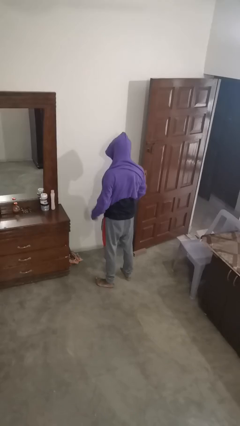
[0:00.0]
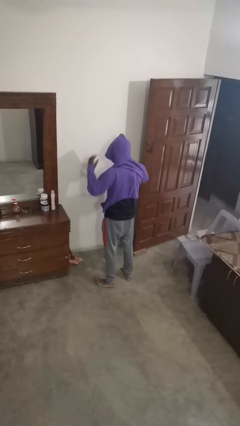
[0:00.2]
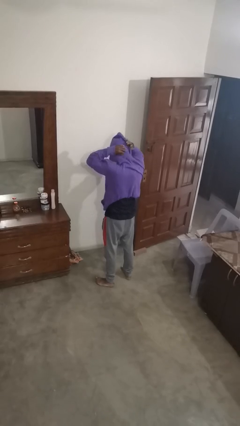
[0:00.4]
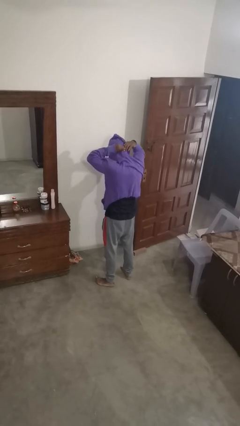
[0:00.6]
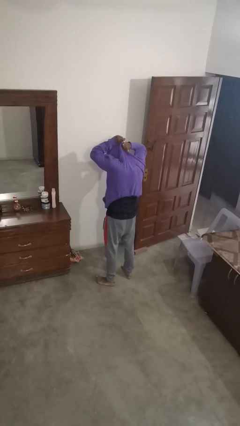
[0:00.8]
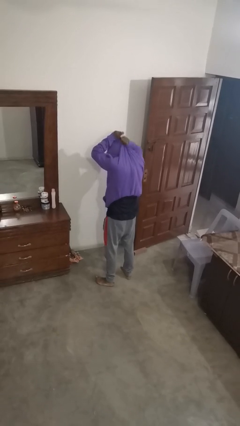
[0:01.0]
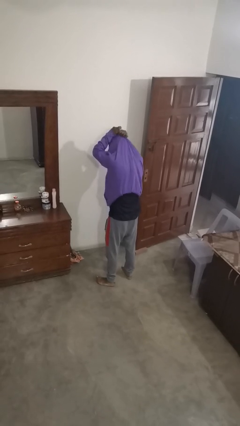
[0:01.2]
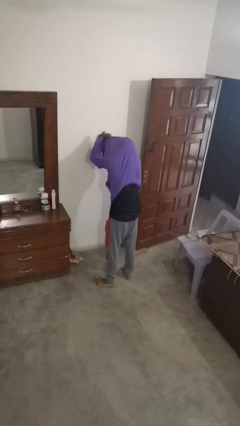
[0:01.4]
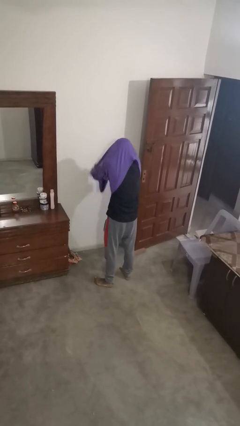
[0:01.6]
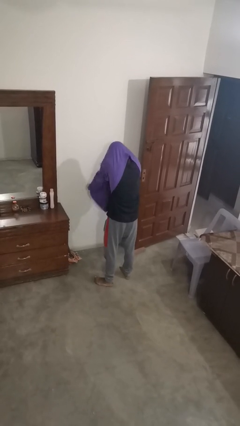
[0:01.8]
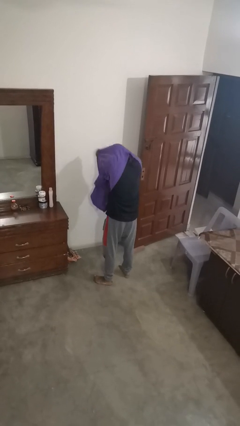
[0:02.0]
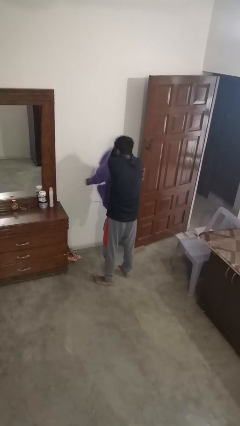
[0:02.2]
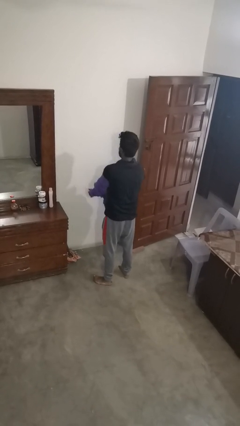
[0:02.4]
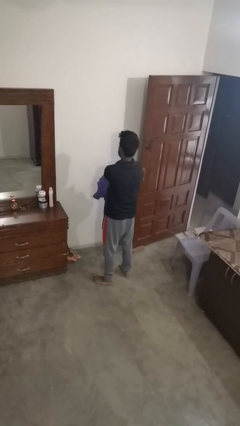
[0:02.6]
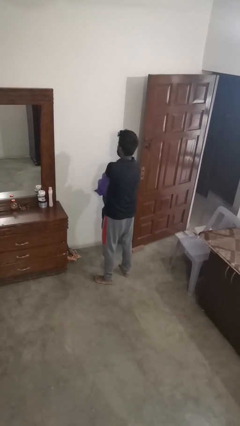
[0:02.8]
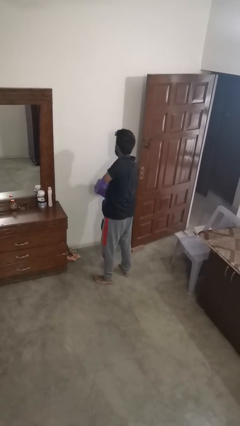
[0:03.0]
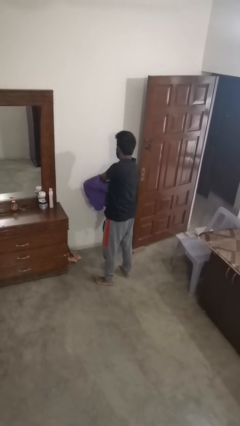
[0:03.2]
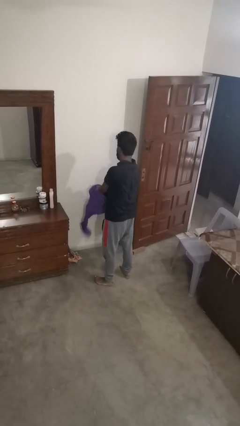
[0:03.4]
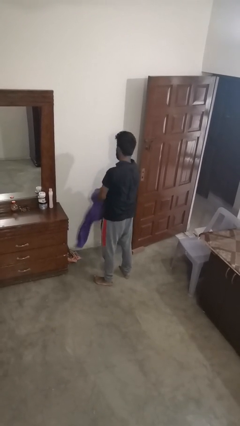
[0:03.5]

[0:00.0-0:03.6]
person takes off hoodie

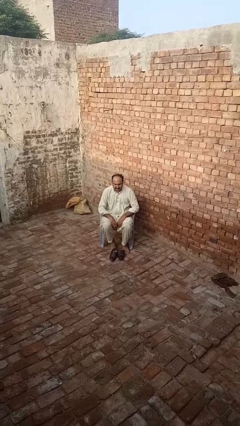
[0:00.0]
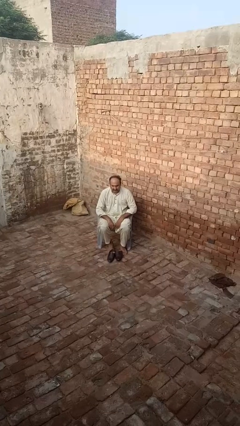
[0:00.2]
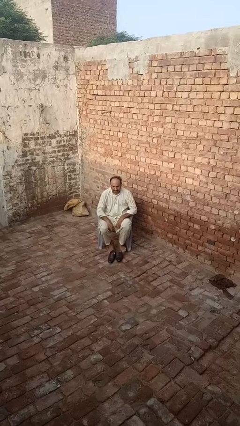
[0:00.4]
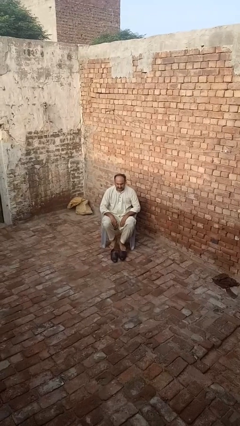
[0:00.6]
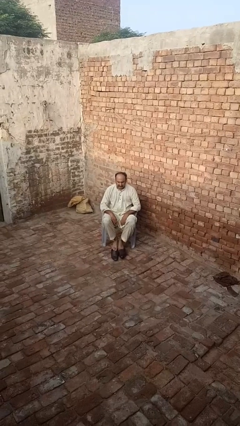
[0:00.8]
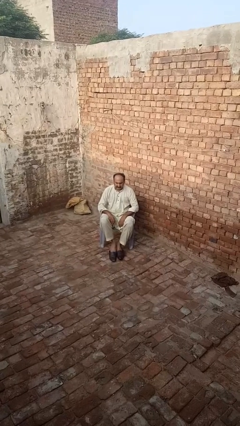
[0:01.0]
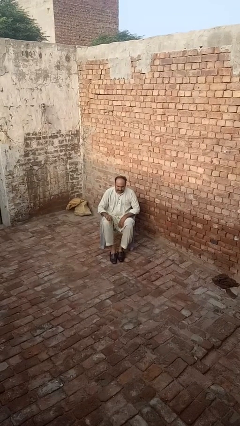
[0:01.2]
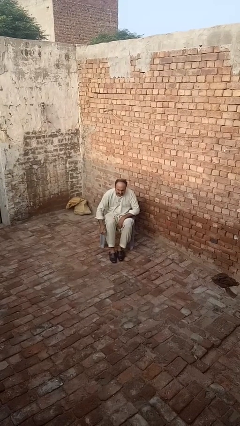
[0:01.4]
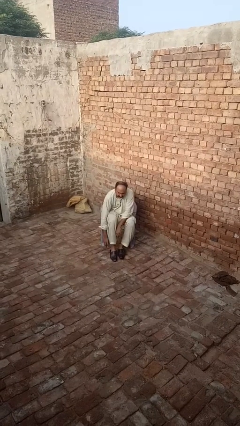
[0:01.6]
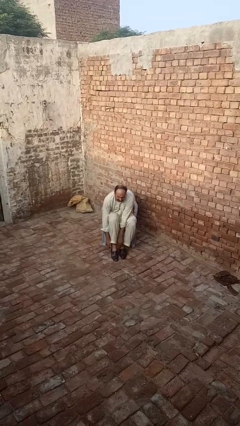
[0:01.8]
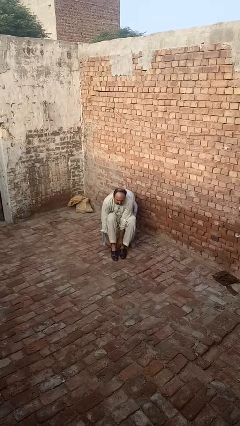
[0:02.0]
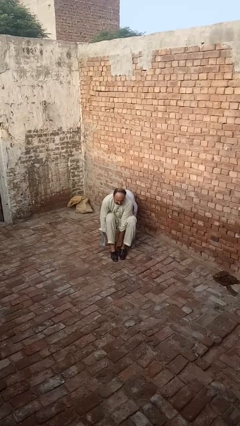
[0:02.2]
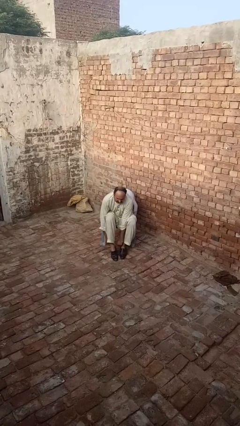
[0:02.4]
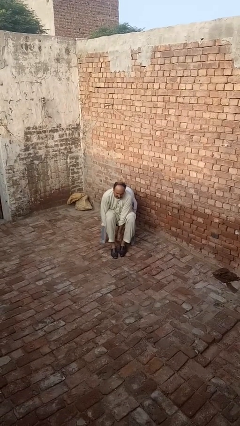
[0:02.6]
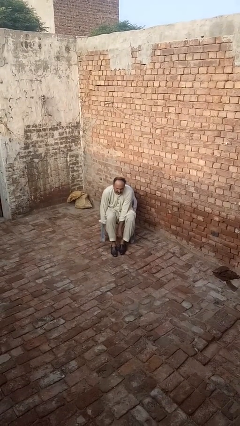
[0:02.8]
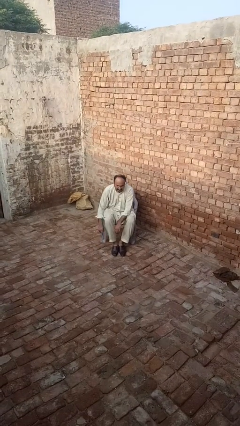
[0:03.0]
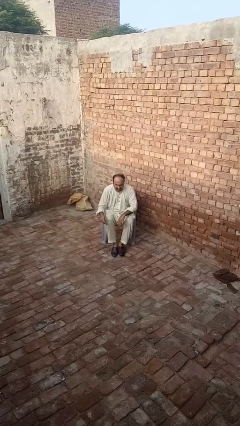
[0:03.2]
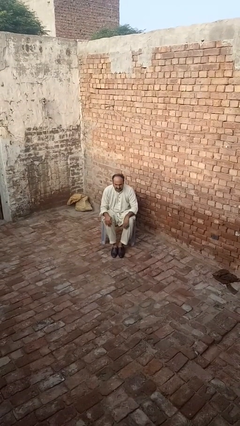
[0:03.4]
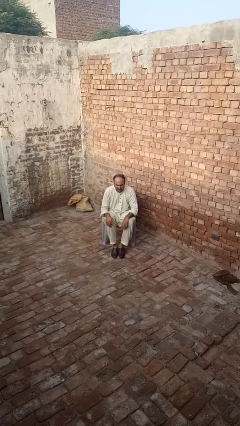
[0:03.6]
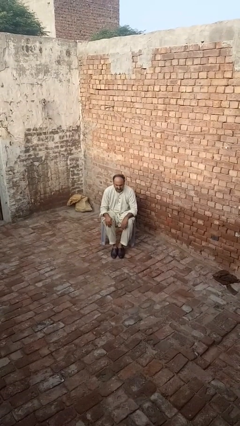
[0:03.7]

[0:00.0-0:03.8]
person puts on shoes

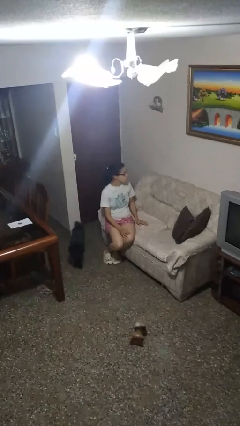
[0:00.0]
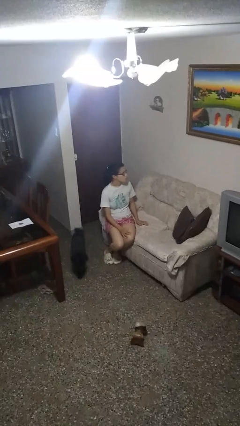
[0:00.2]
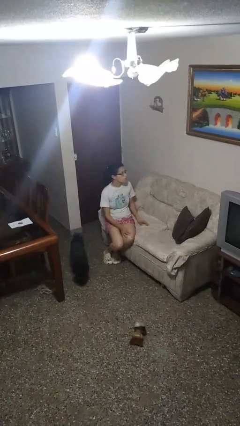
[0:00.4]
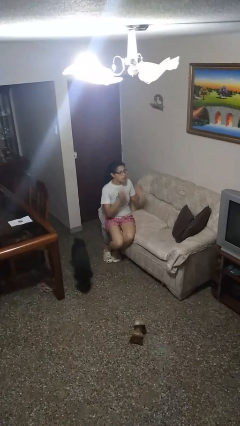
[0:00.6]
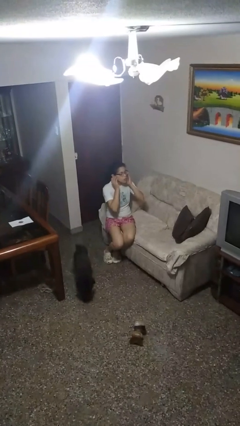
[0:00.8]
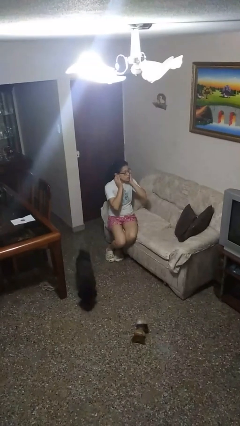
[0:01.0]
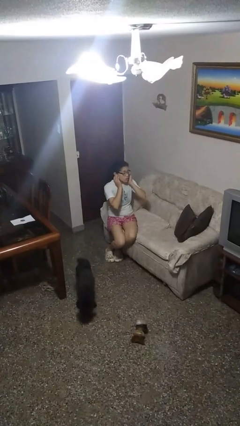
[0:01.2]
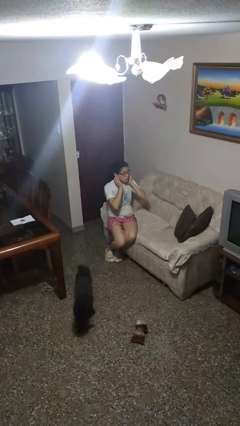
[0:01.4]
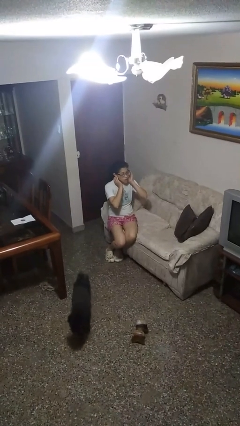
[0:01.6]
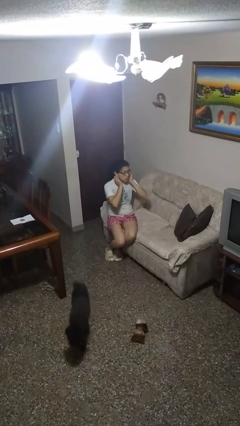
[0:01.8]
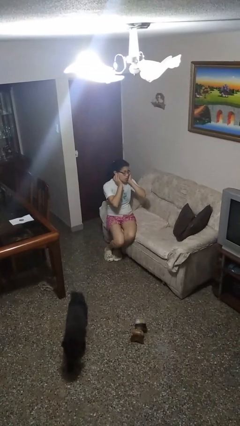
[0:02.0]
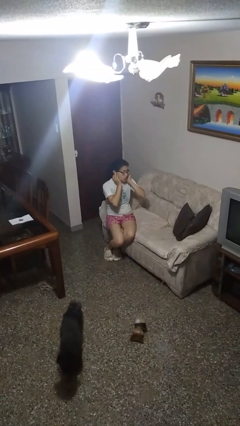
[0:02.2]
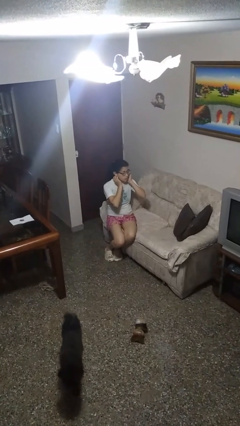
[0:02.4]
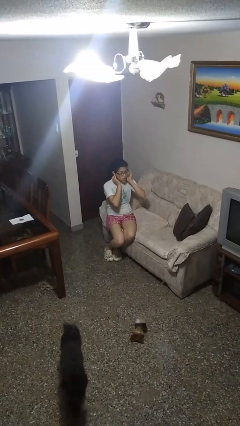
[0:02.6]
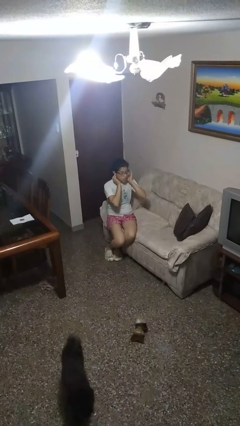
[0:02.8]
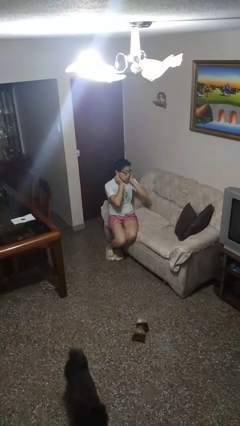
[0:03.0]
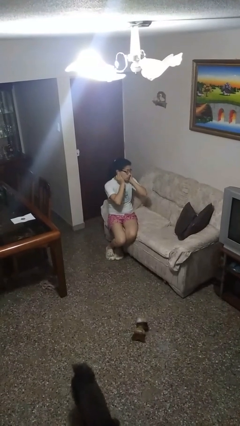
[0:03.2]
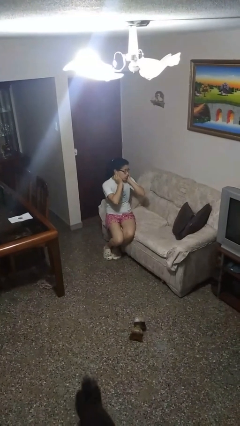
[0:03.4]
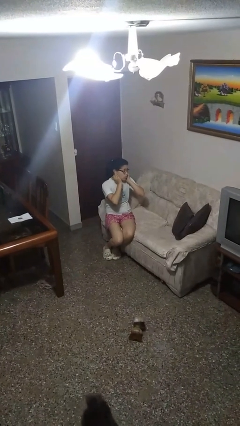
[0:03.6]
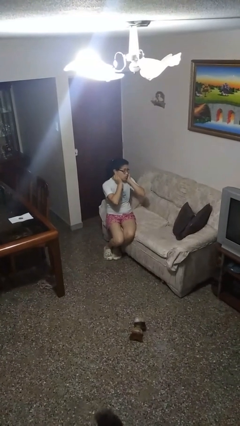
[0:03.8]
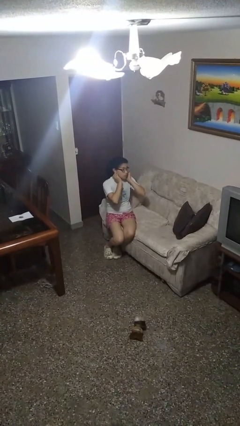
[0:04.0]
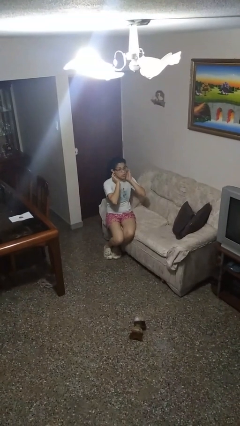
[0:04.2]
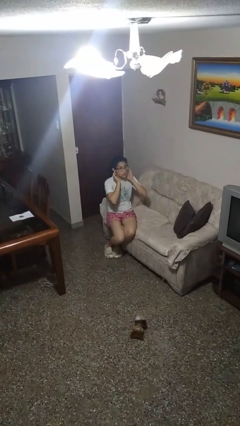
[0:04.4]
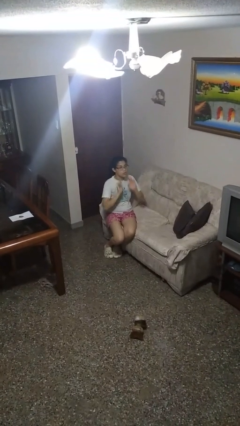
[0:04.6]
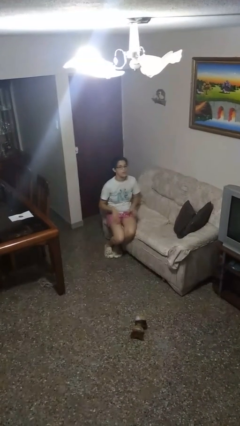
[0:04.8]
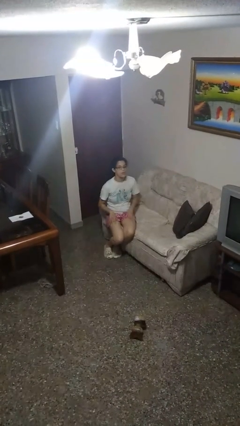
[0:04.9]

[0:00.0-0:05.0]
person puts fingers in ear

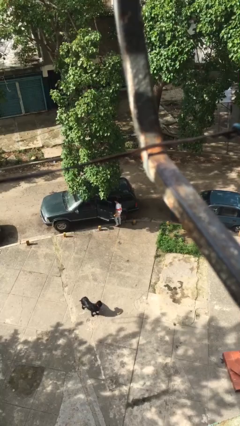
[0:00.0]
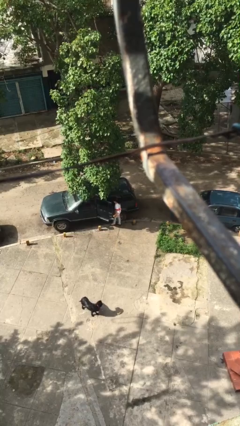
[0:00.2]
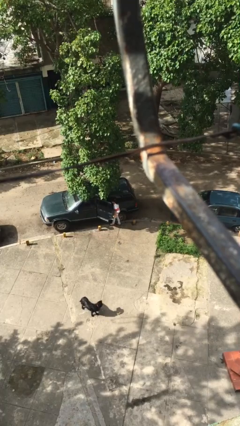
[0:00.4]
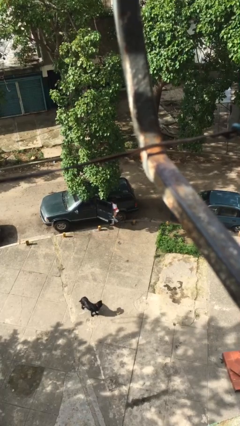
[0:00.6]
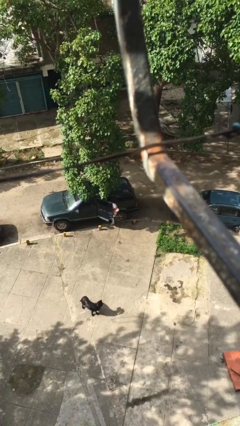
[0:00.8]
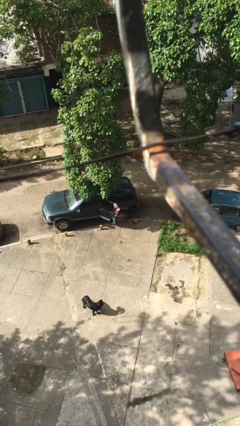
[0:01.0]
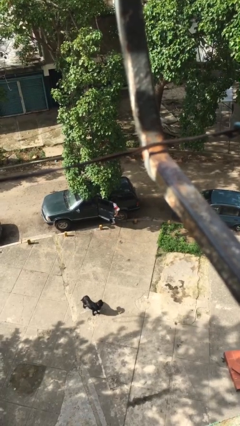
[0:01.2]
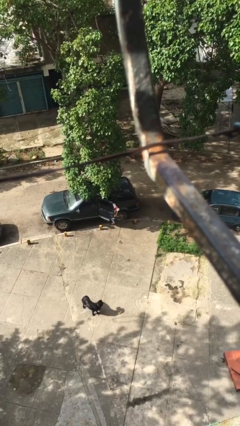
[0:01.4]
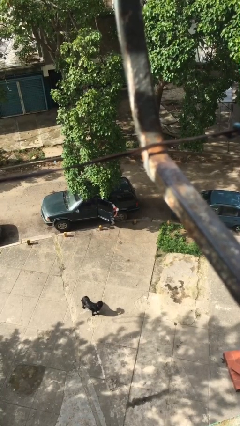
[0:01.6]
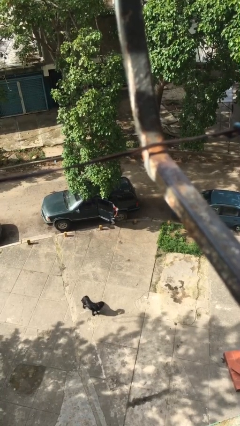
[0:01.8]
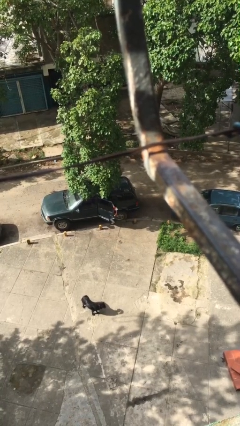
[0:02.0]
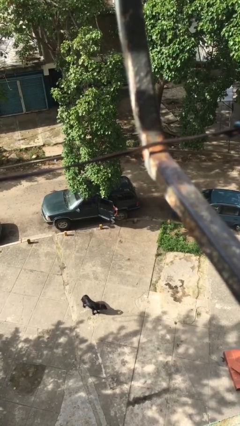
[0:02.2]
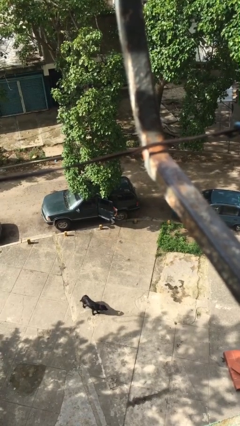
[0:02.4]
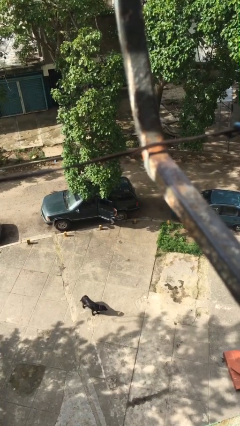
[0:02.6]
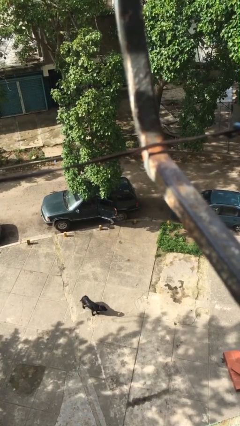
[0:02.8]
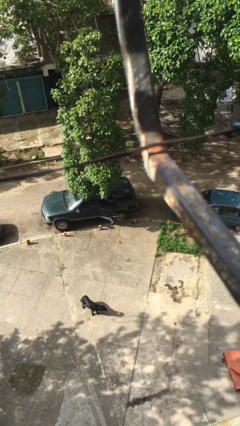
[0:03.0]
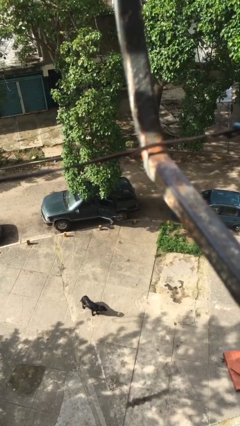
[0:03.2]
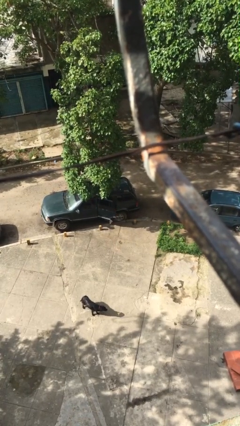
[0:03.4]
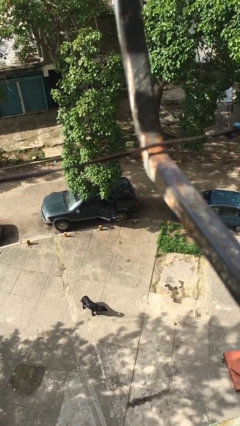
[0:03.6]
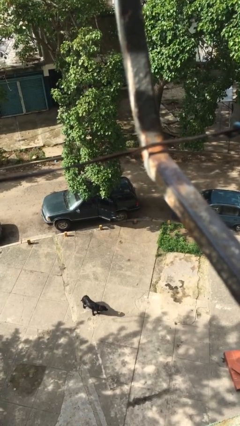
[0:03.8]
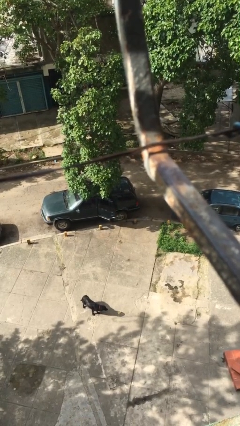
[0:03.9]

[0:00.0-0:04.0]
person enters car

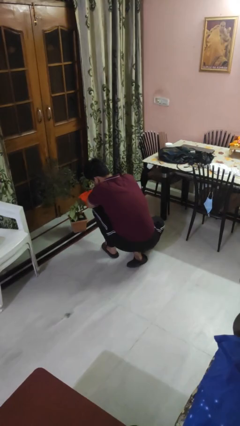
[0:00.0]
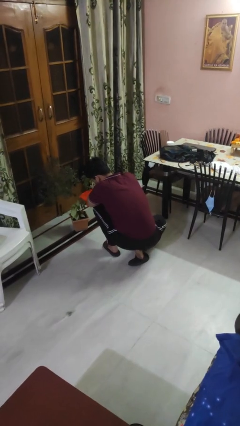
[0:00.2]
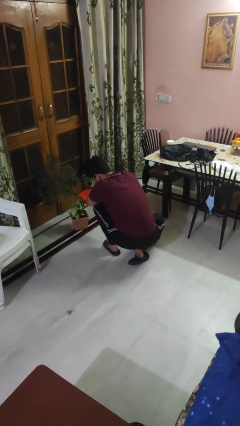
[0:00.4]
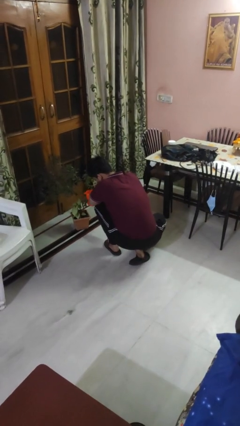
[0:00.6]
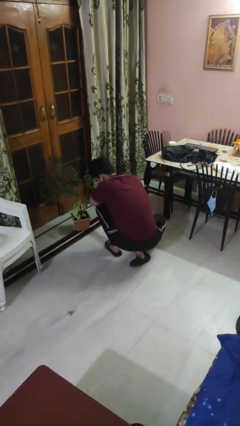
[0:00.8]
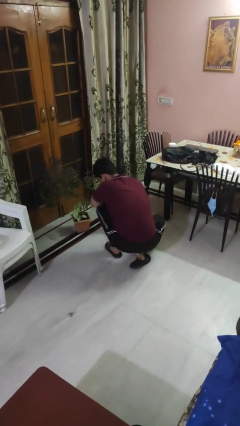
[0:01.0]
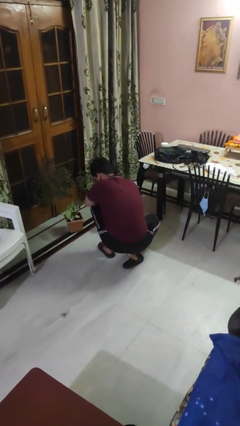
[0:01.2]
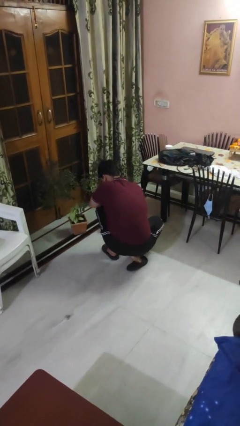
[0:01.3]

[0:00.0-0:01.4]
person waters houseplant
